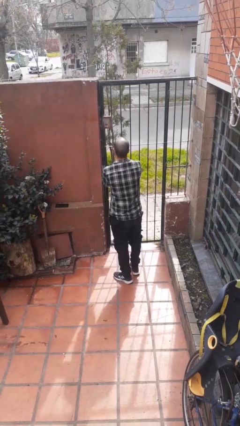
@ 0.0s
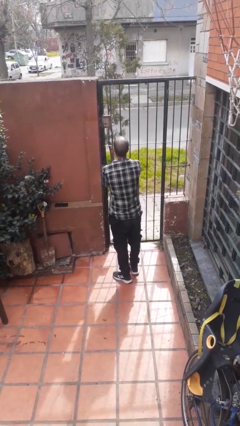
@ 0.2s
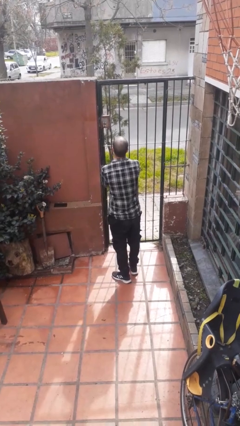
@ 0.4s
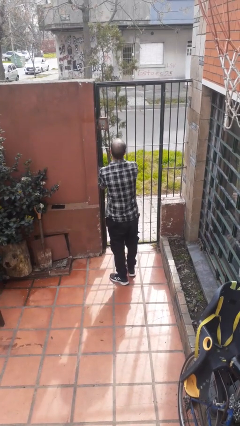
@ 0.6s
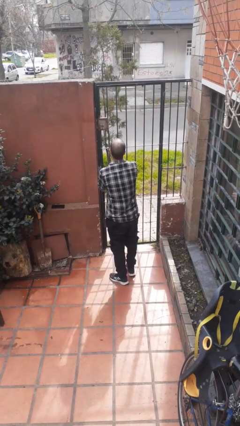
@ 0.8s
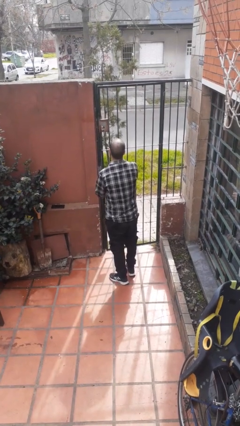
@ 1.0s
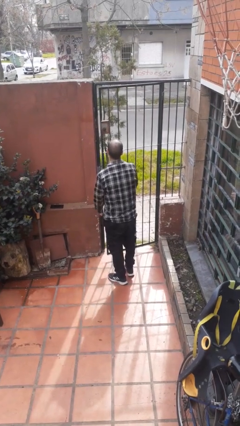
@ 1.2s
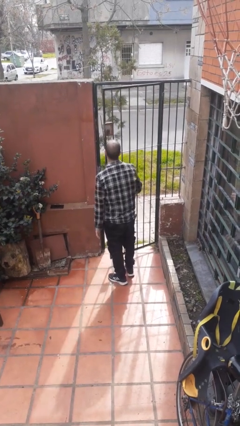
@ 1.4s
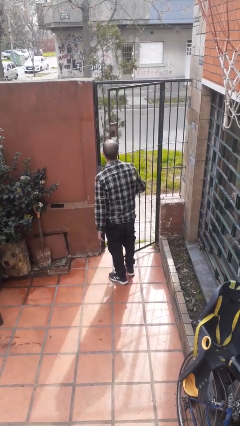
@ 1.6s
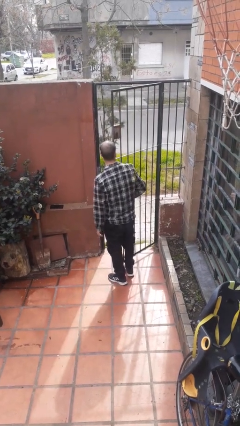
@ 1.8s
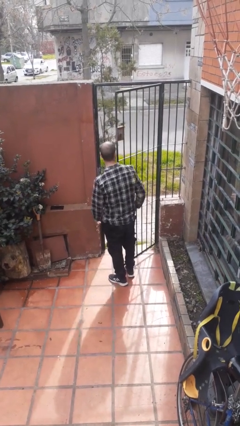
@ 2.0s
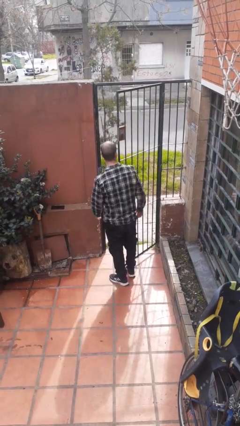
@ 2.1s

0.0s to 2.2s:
person opens gate

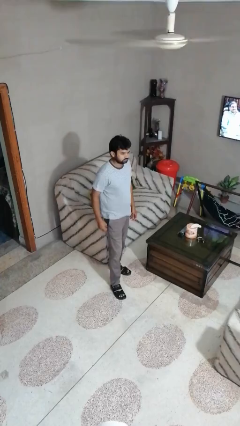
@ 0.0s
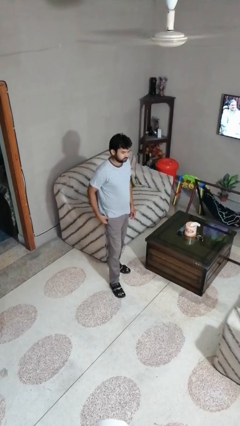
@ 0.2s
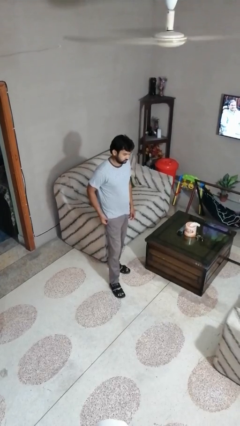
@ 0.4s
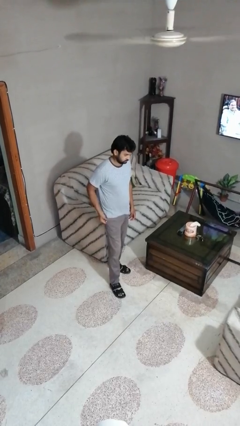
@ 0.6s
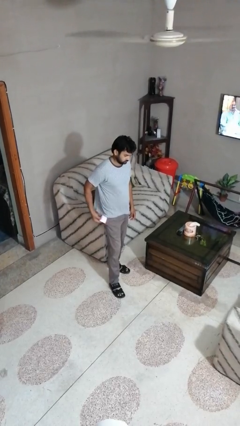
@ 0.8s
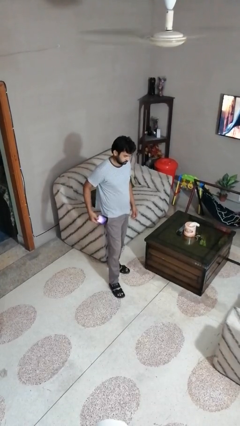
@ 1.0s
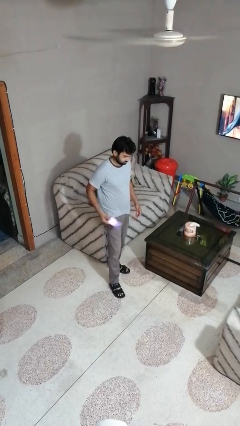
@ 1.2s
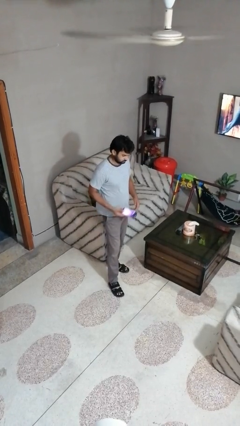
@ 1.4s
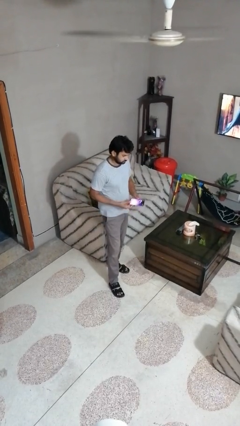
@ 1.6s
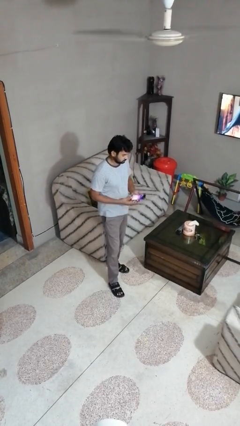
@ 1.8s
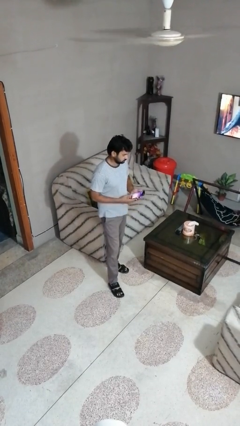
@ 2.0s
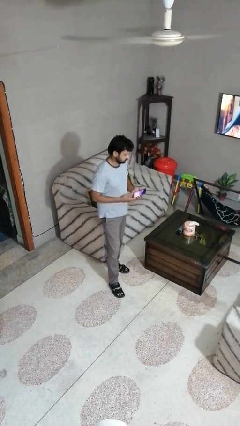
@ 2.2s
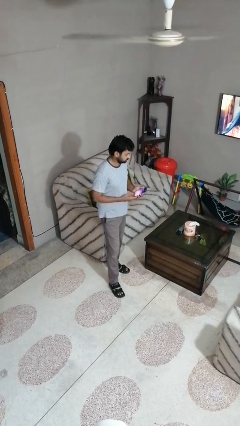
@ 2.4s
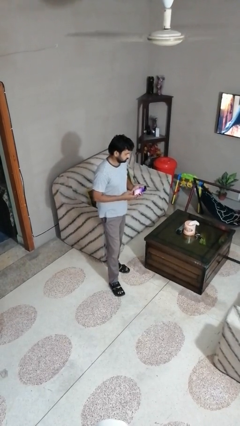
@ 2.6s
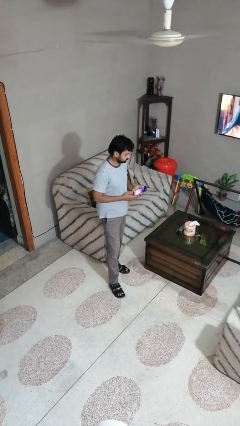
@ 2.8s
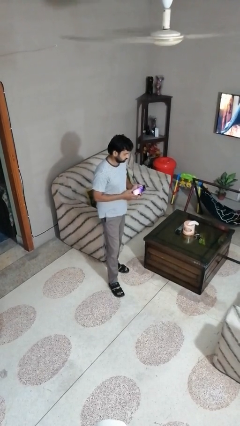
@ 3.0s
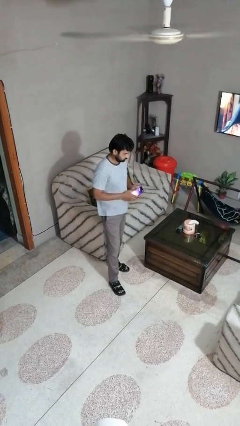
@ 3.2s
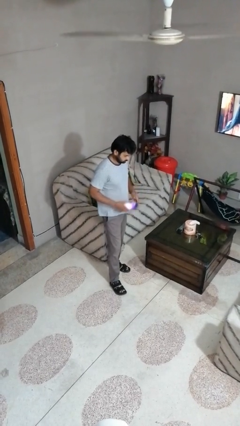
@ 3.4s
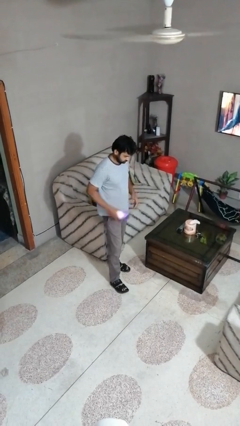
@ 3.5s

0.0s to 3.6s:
person takes phone from pocket

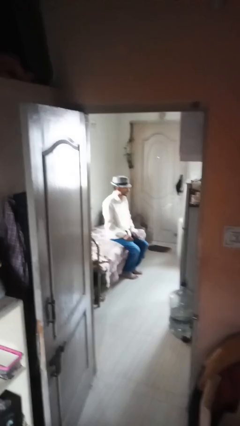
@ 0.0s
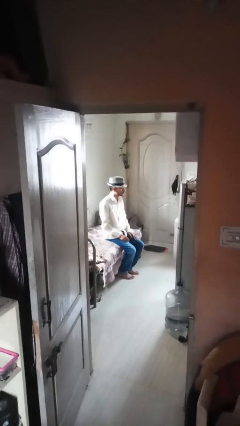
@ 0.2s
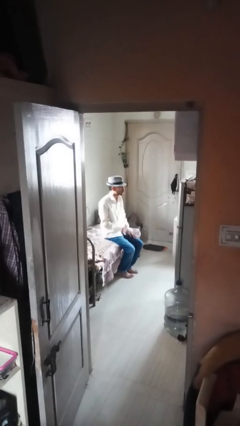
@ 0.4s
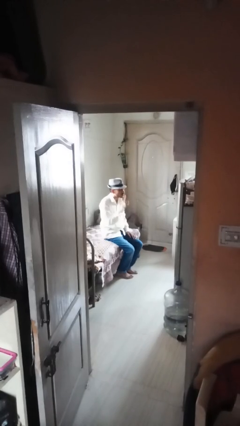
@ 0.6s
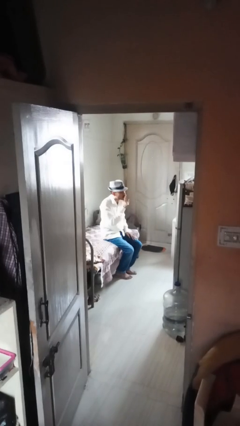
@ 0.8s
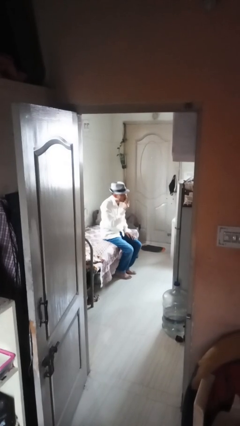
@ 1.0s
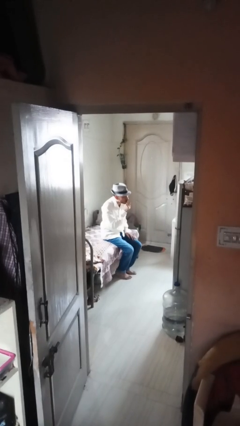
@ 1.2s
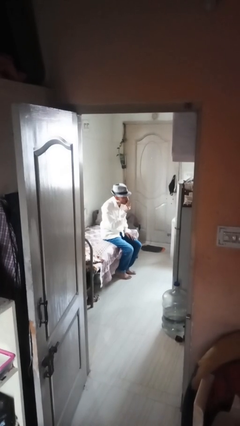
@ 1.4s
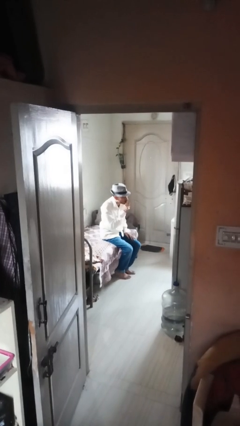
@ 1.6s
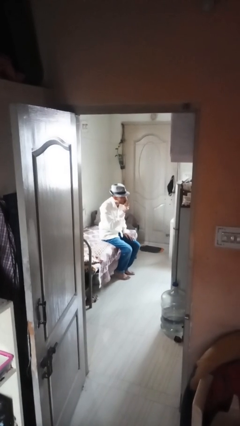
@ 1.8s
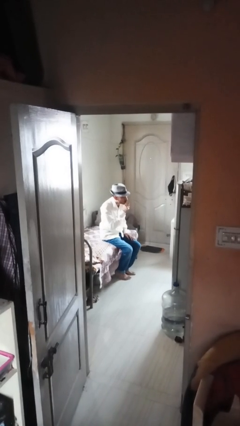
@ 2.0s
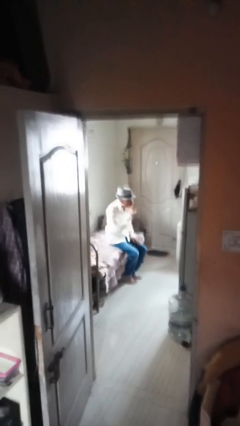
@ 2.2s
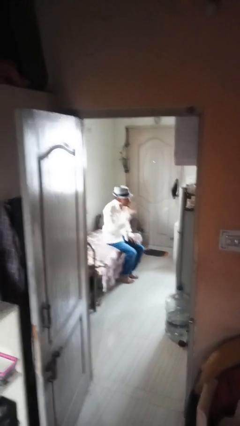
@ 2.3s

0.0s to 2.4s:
person gestures be quiet

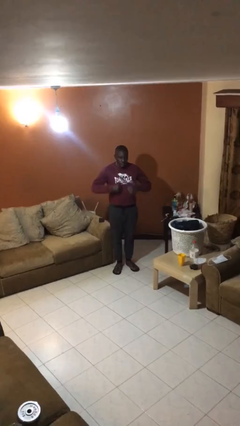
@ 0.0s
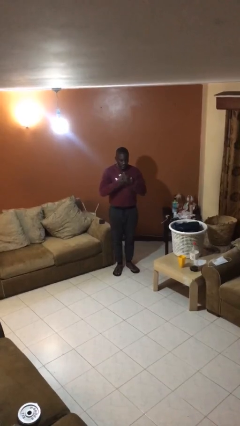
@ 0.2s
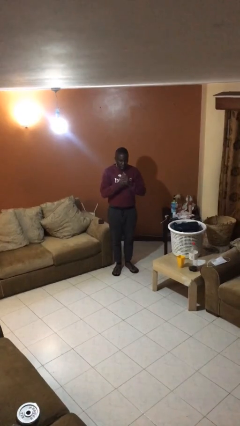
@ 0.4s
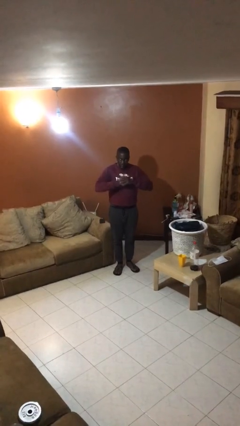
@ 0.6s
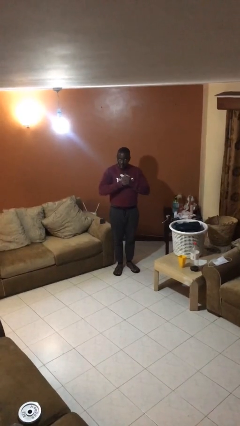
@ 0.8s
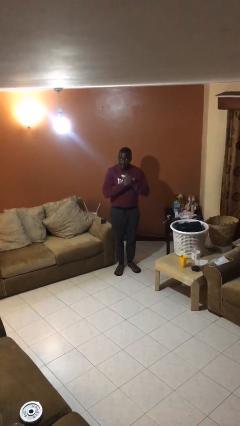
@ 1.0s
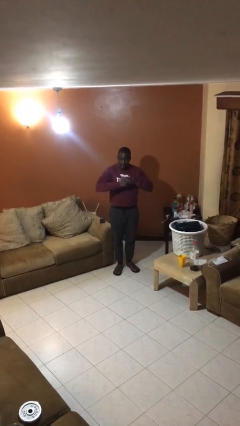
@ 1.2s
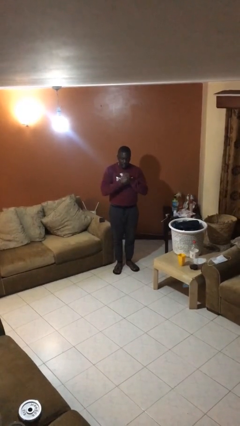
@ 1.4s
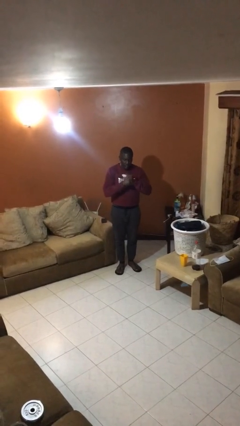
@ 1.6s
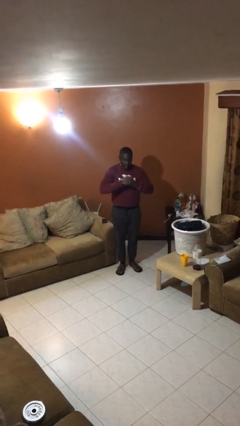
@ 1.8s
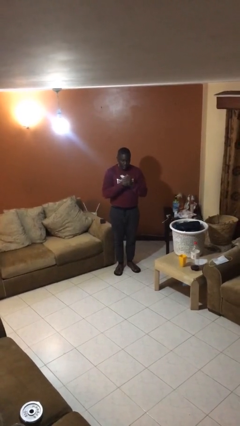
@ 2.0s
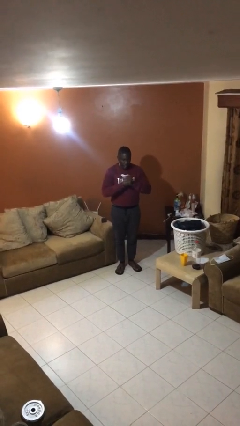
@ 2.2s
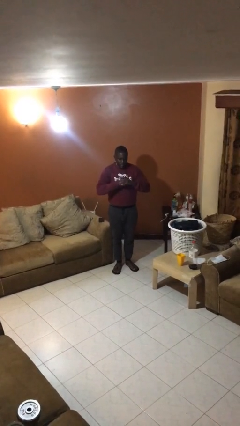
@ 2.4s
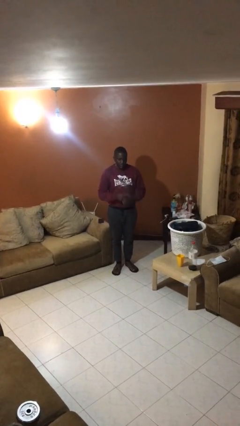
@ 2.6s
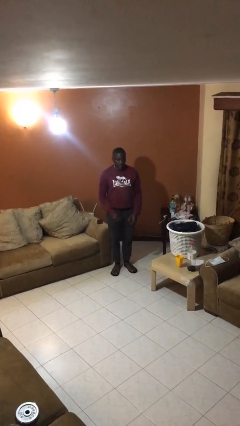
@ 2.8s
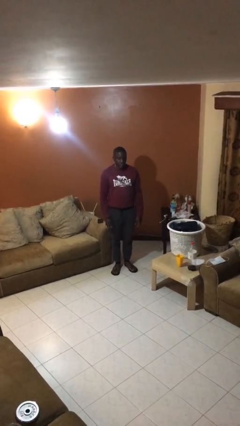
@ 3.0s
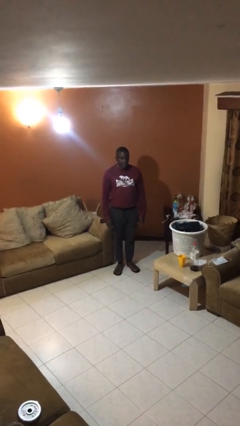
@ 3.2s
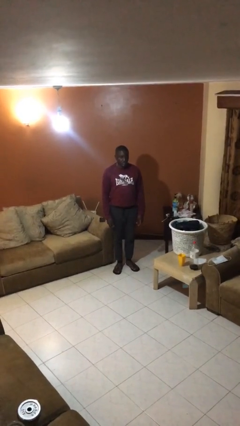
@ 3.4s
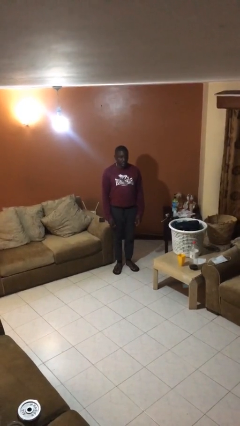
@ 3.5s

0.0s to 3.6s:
person cracks knuckles

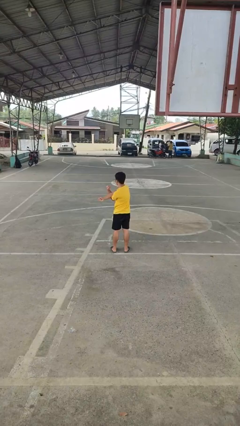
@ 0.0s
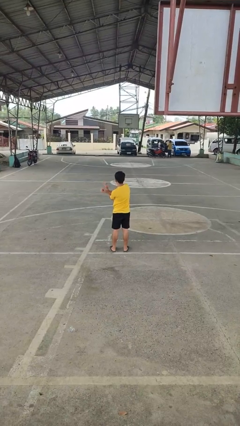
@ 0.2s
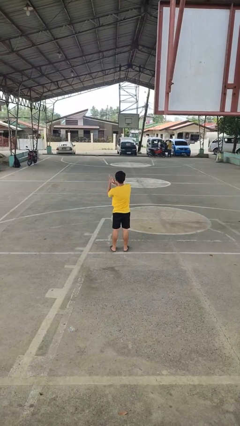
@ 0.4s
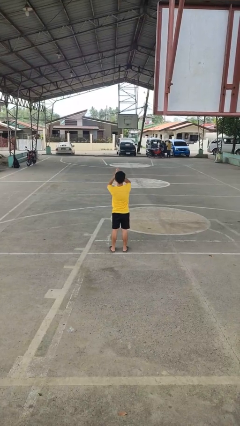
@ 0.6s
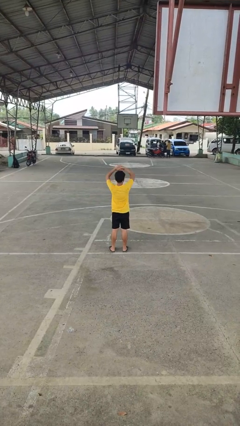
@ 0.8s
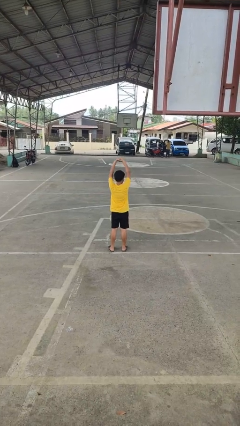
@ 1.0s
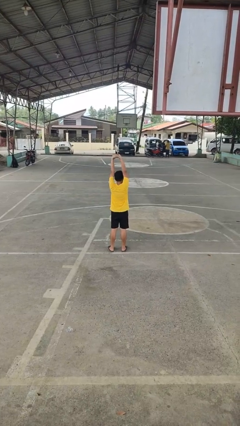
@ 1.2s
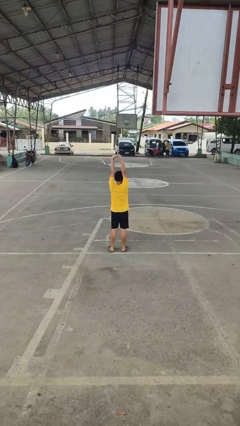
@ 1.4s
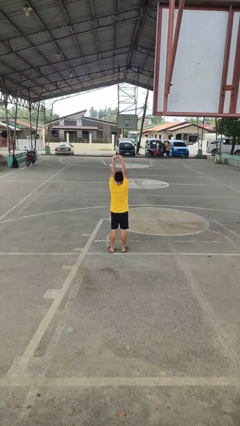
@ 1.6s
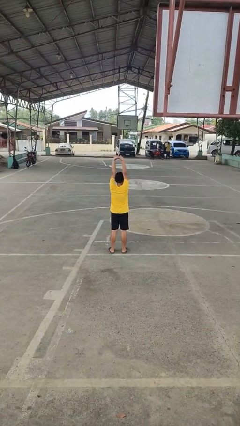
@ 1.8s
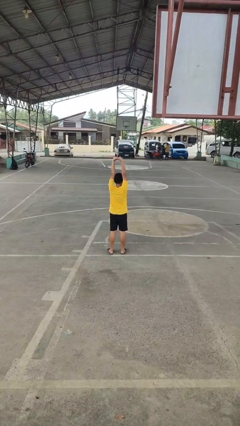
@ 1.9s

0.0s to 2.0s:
person stretches arms over head

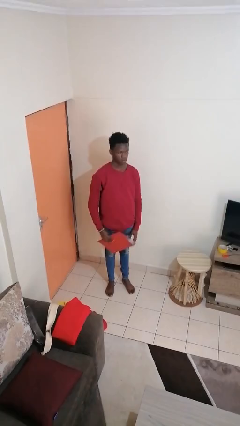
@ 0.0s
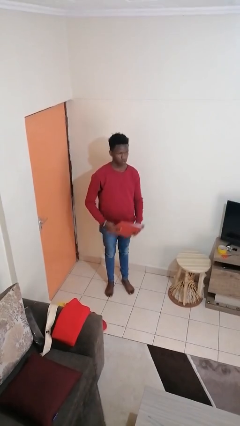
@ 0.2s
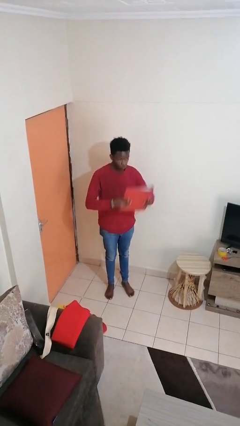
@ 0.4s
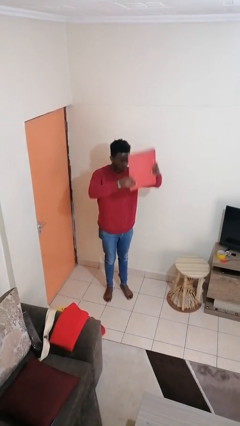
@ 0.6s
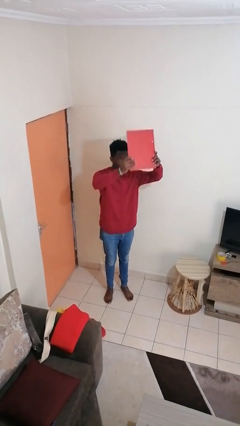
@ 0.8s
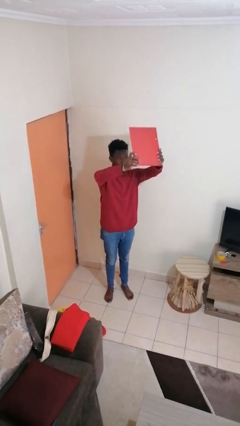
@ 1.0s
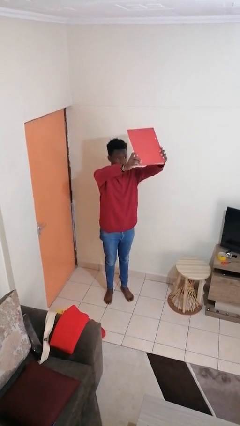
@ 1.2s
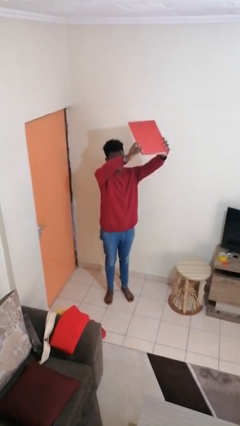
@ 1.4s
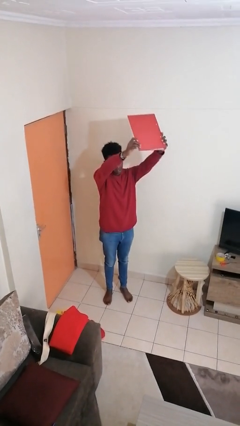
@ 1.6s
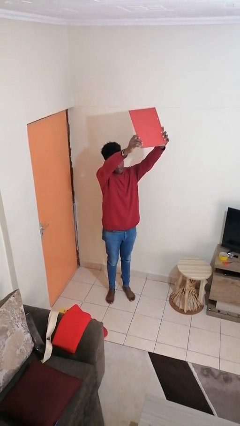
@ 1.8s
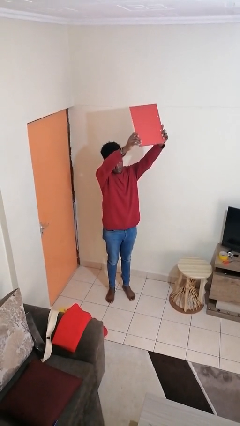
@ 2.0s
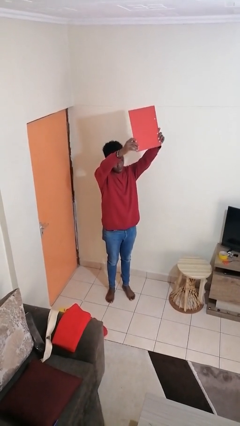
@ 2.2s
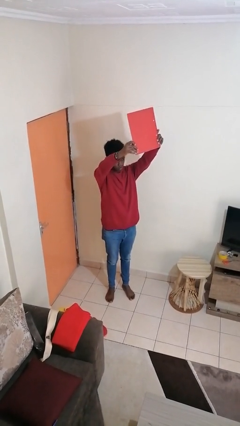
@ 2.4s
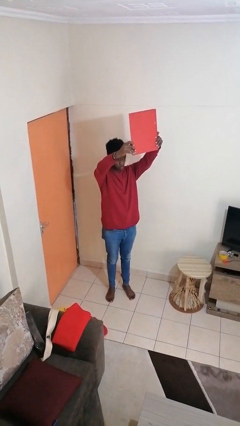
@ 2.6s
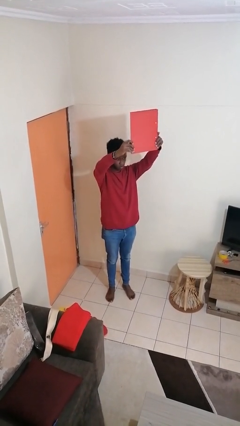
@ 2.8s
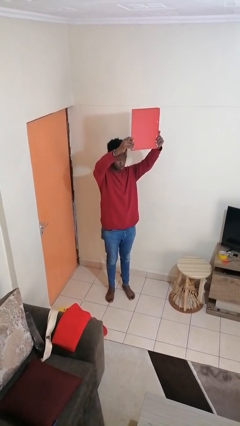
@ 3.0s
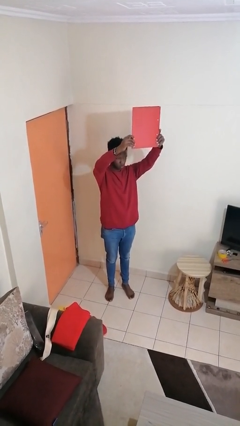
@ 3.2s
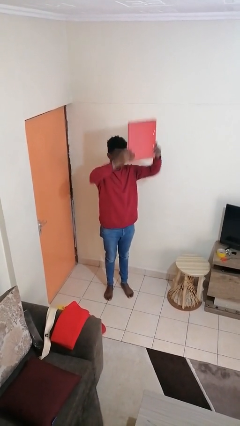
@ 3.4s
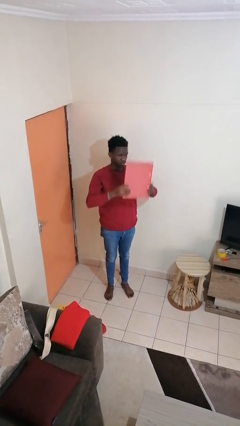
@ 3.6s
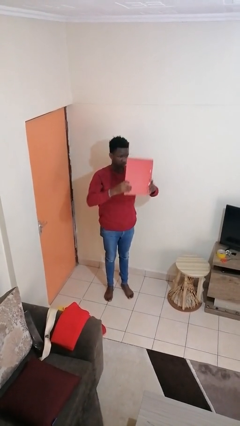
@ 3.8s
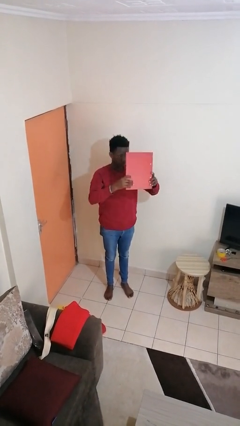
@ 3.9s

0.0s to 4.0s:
person holds object above head

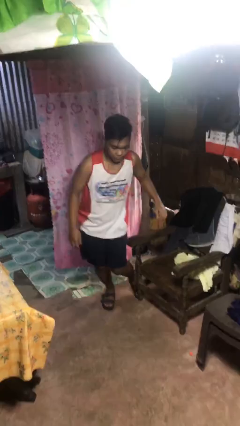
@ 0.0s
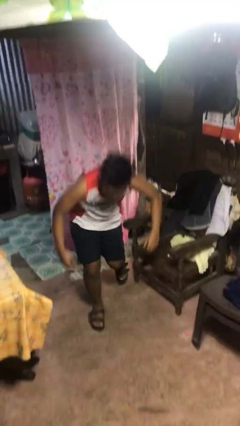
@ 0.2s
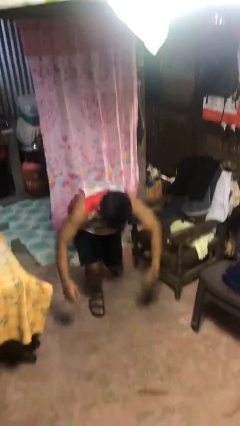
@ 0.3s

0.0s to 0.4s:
person trips on object on floor
